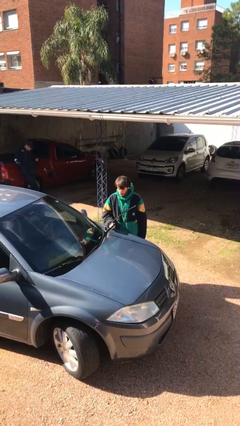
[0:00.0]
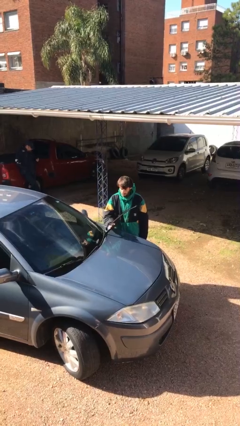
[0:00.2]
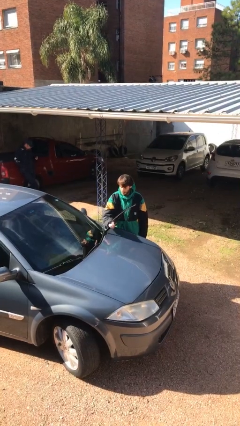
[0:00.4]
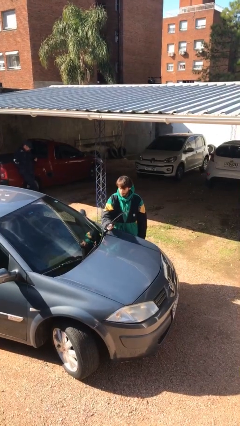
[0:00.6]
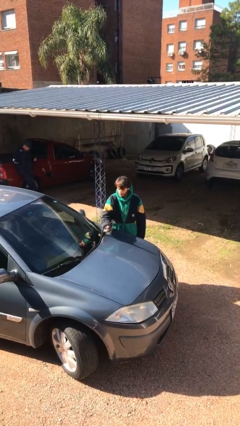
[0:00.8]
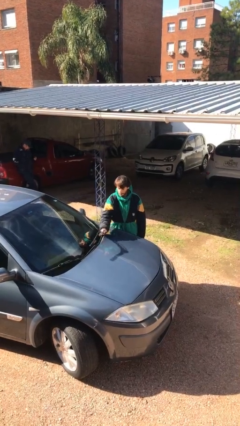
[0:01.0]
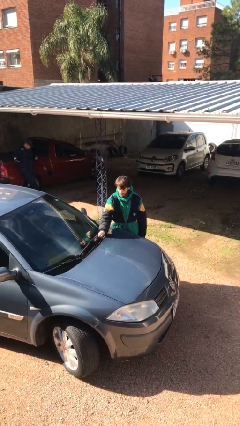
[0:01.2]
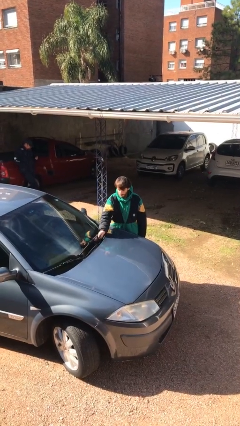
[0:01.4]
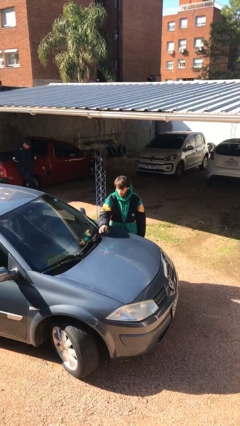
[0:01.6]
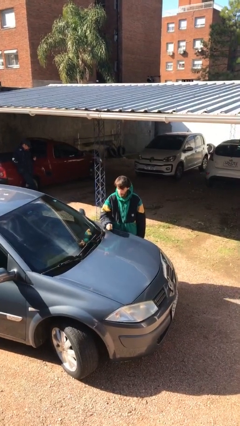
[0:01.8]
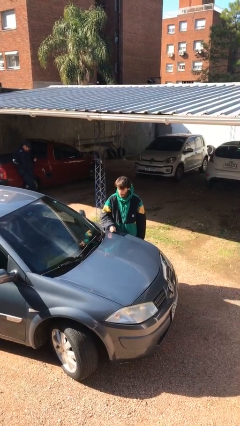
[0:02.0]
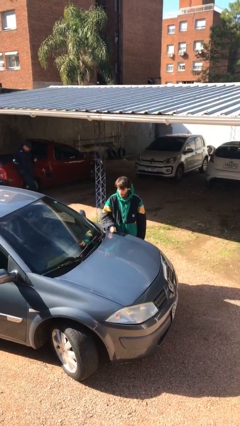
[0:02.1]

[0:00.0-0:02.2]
person flips down car wipers

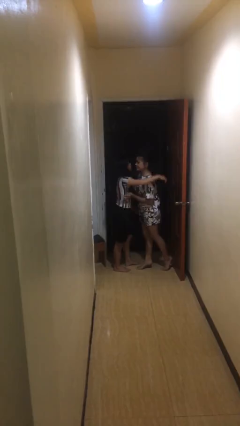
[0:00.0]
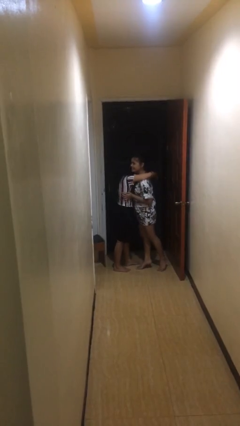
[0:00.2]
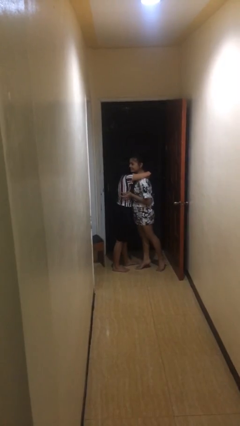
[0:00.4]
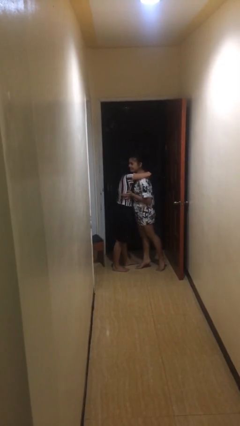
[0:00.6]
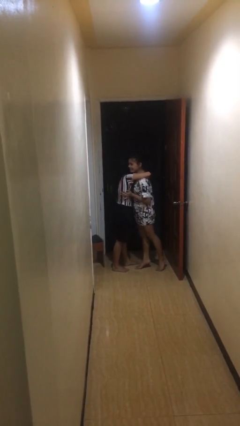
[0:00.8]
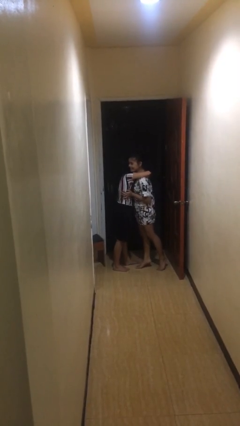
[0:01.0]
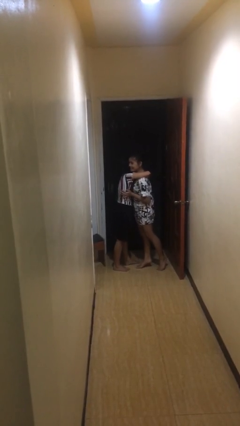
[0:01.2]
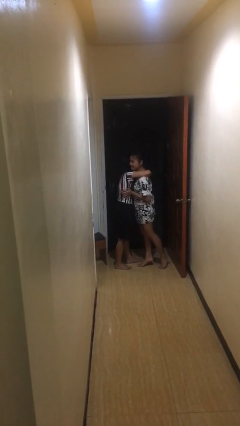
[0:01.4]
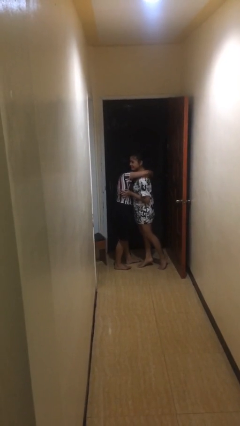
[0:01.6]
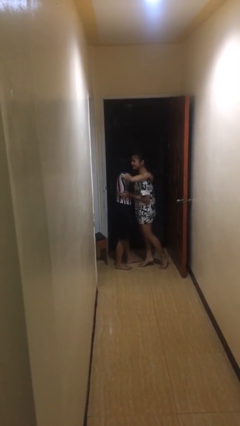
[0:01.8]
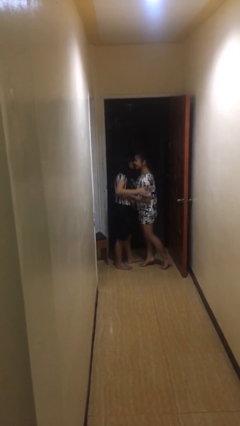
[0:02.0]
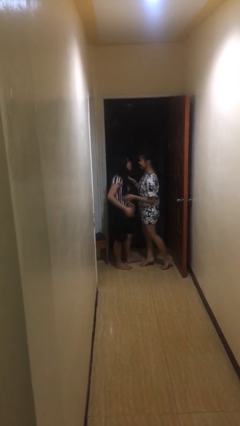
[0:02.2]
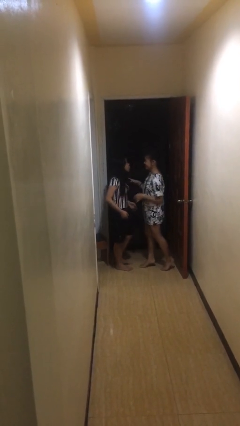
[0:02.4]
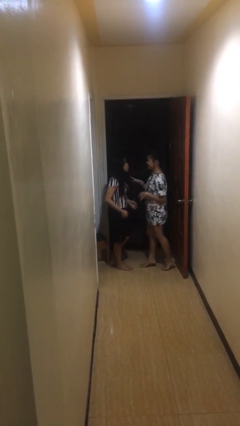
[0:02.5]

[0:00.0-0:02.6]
person embraces person

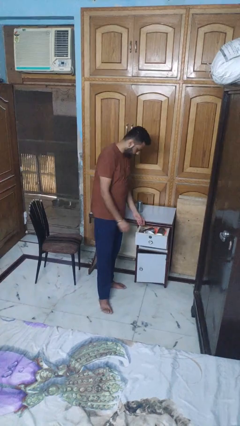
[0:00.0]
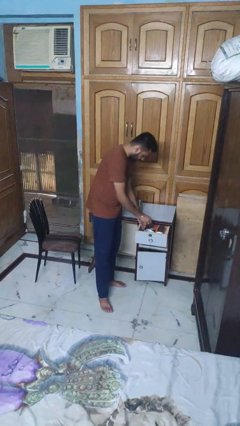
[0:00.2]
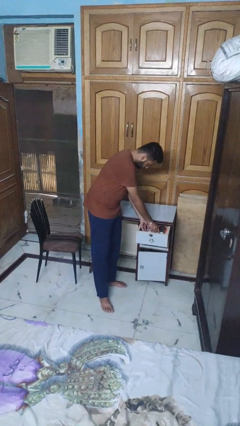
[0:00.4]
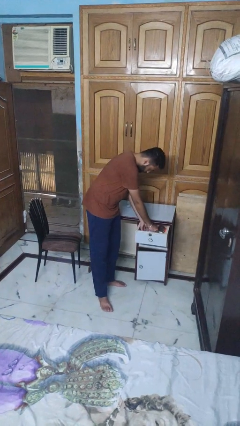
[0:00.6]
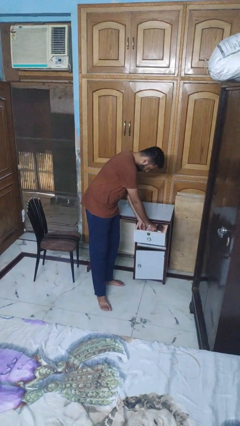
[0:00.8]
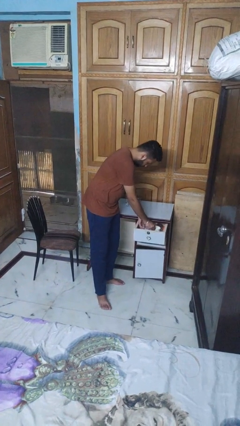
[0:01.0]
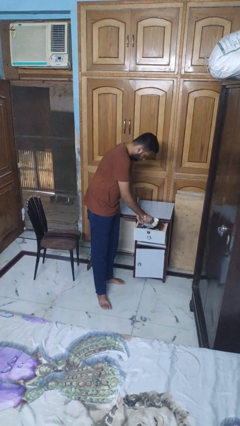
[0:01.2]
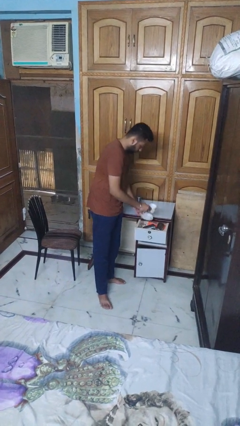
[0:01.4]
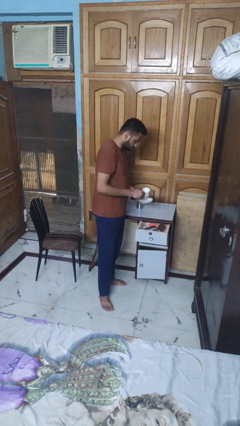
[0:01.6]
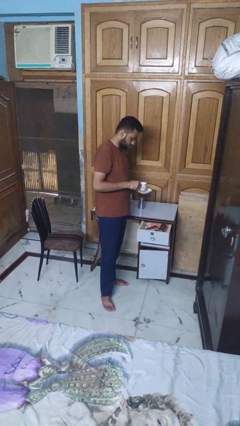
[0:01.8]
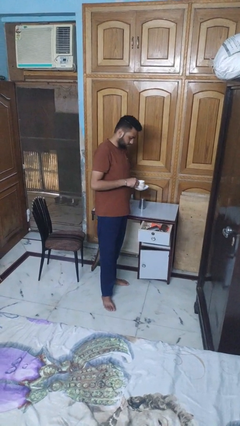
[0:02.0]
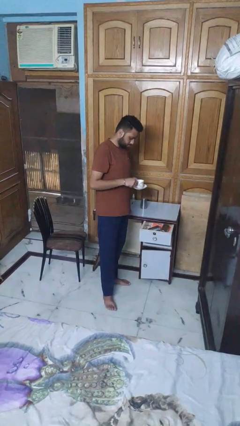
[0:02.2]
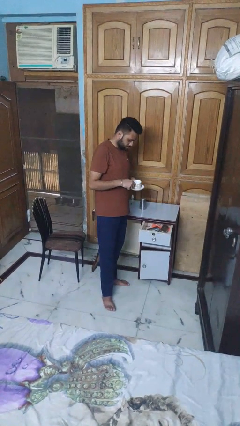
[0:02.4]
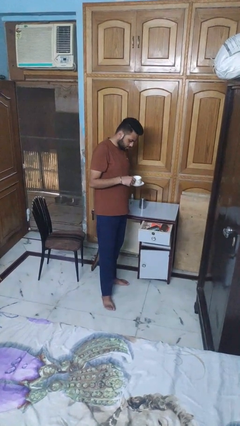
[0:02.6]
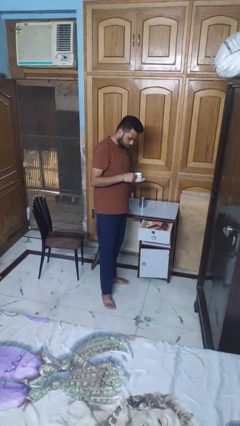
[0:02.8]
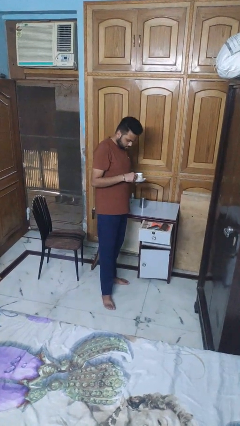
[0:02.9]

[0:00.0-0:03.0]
person takes object from kitchen drawer

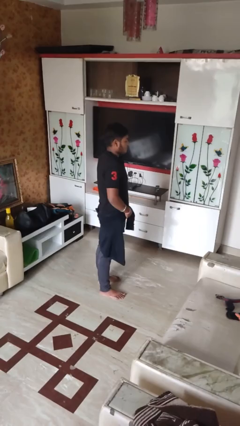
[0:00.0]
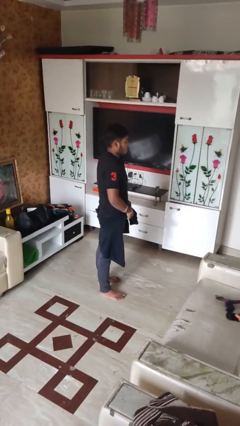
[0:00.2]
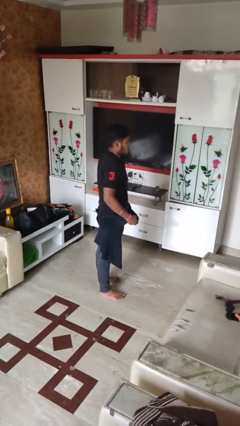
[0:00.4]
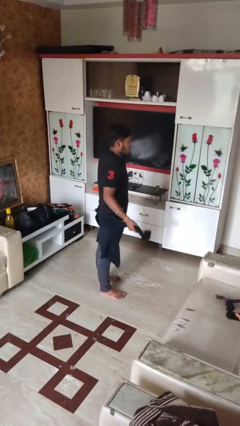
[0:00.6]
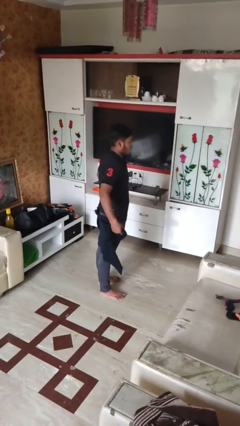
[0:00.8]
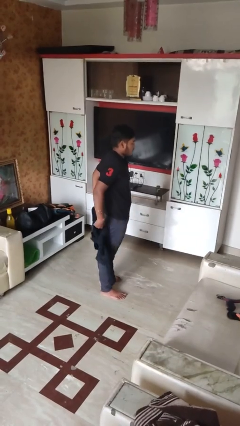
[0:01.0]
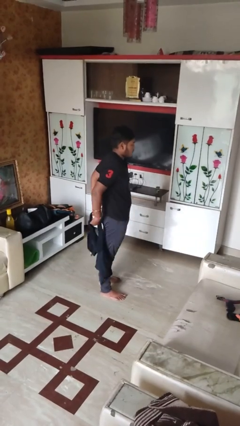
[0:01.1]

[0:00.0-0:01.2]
person unties jacket around waist

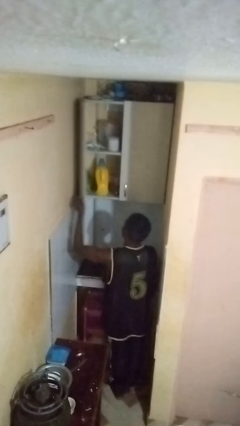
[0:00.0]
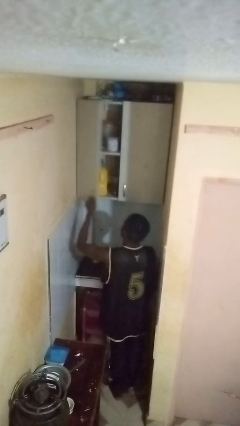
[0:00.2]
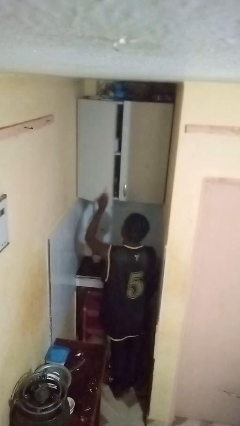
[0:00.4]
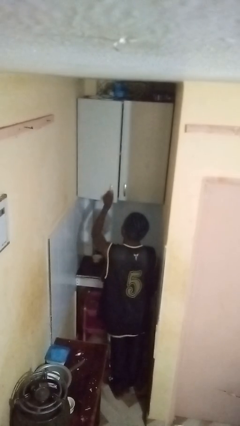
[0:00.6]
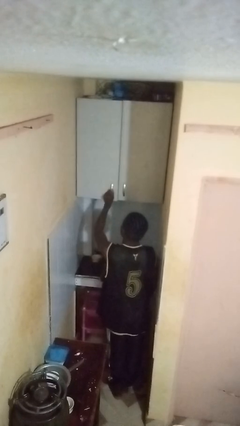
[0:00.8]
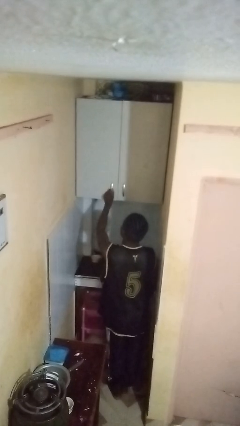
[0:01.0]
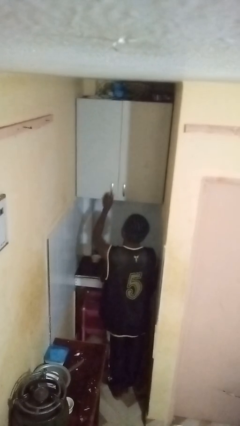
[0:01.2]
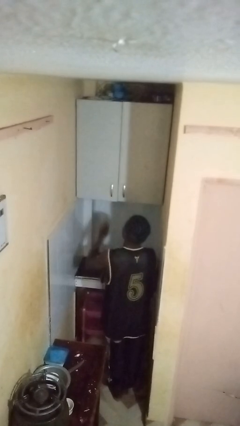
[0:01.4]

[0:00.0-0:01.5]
person closes cabinet

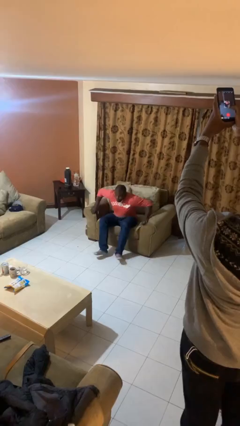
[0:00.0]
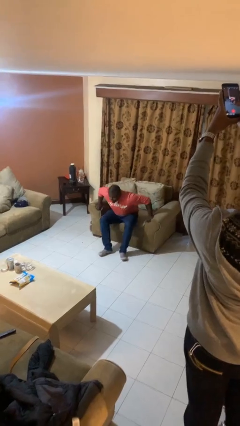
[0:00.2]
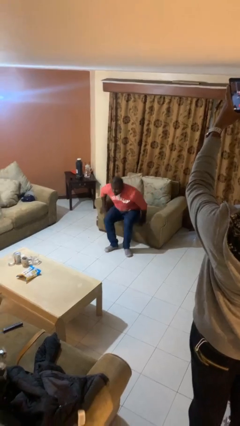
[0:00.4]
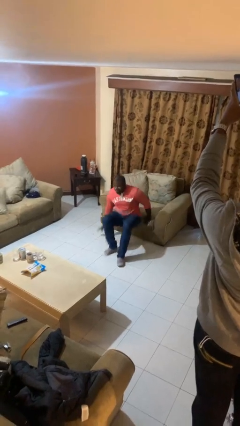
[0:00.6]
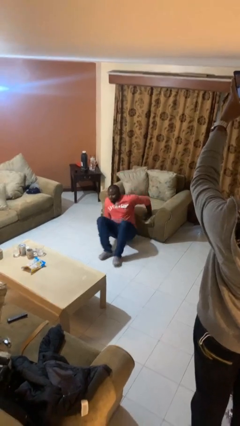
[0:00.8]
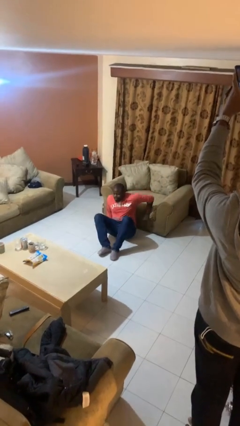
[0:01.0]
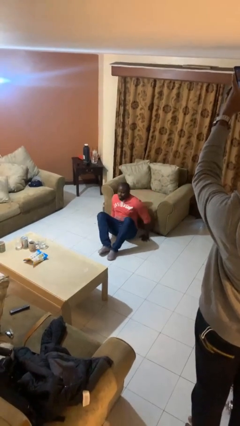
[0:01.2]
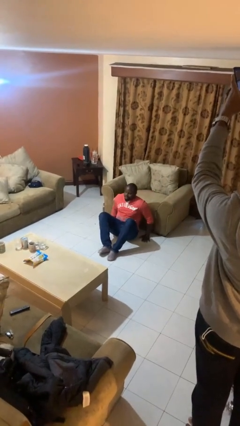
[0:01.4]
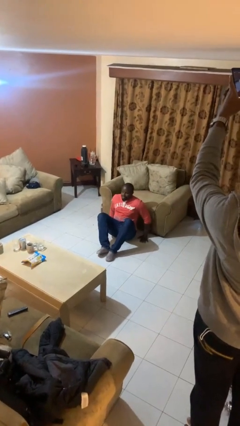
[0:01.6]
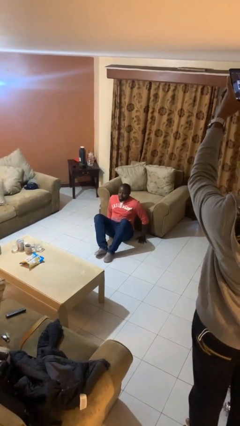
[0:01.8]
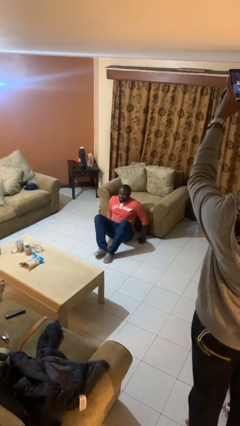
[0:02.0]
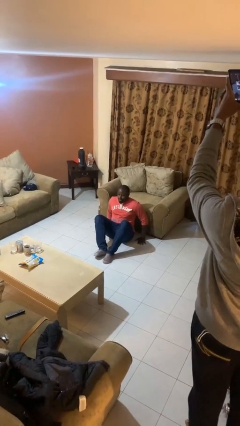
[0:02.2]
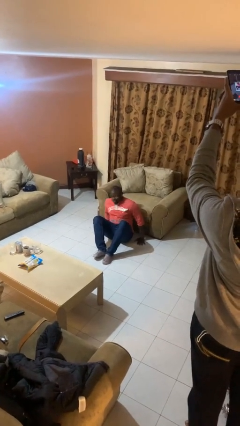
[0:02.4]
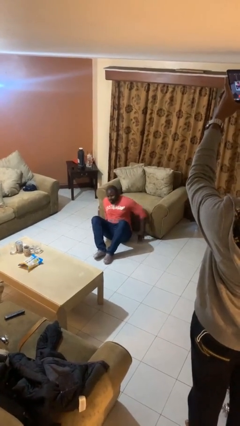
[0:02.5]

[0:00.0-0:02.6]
person falls from chair

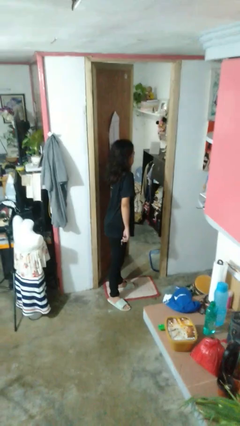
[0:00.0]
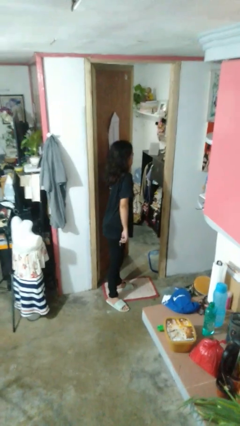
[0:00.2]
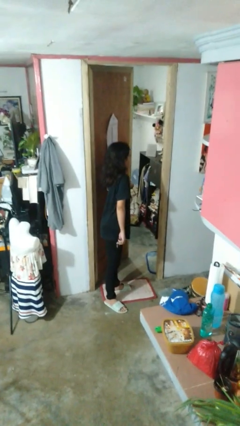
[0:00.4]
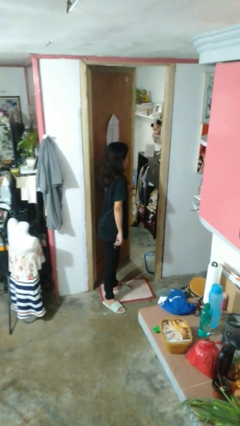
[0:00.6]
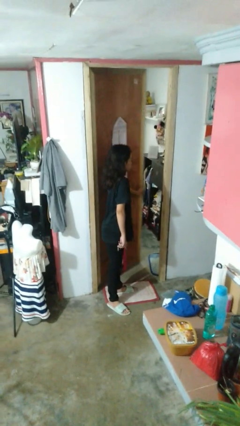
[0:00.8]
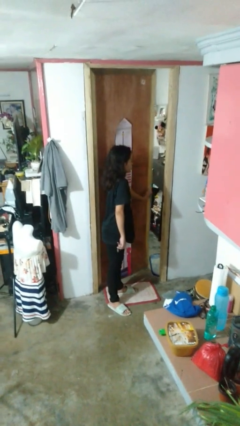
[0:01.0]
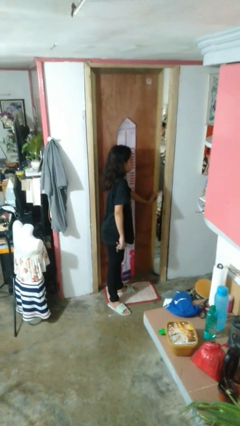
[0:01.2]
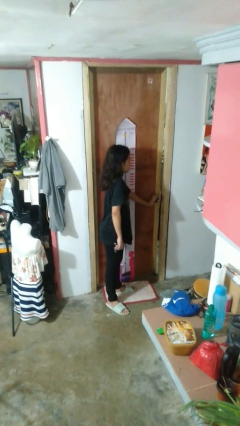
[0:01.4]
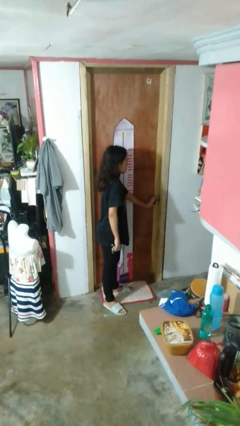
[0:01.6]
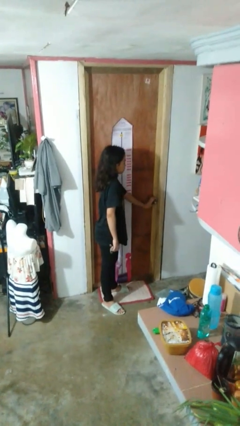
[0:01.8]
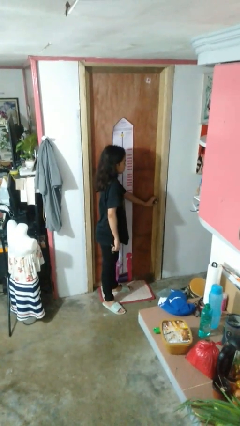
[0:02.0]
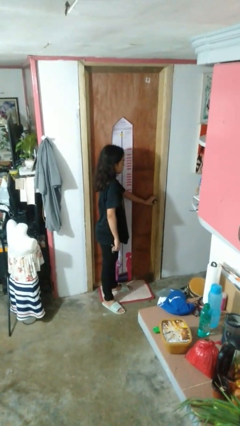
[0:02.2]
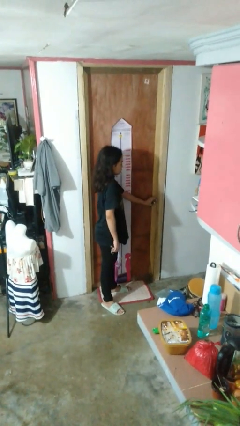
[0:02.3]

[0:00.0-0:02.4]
person closes facility door

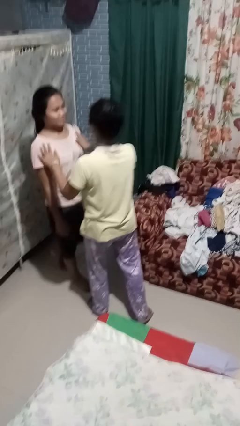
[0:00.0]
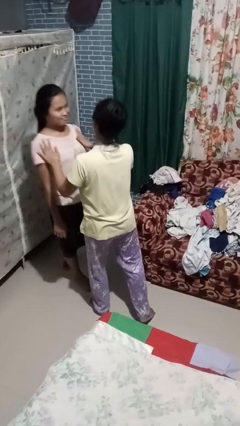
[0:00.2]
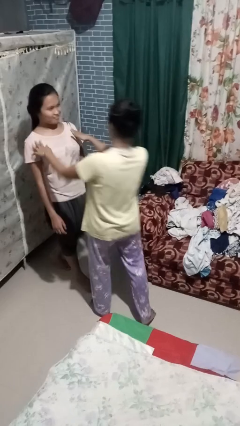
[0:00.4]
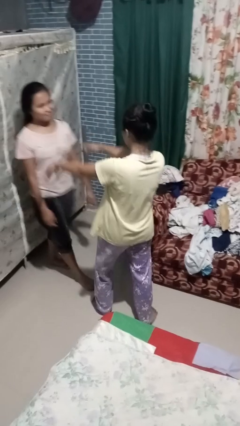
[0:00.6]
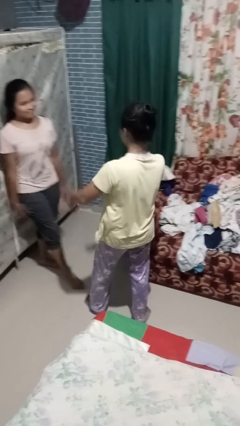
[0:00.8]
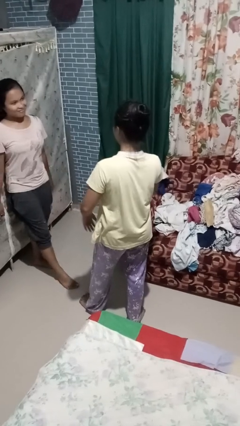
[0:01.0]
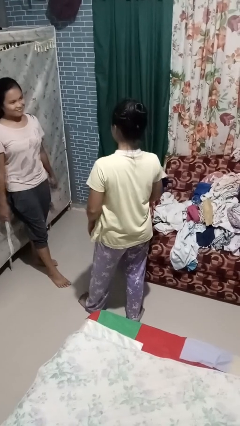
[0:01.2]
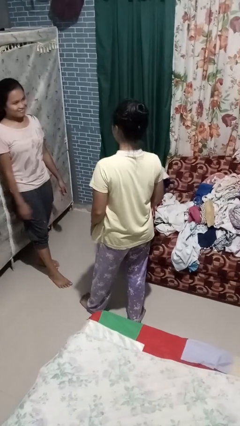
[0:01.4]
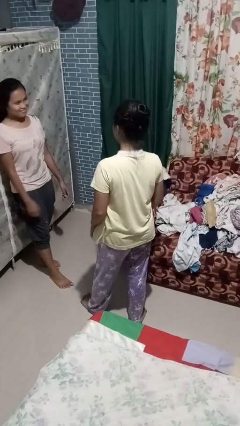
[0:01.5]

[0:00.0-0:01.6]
person shoves person
